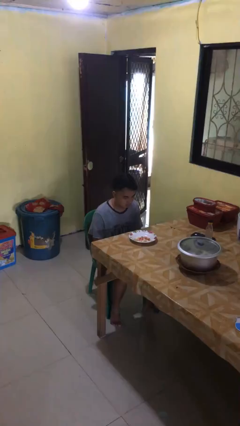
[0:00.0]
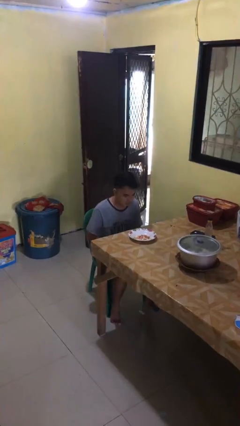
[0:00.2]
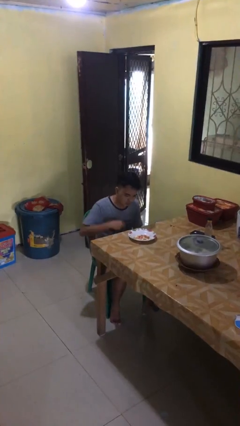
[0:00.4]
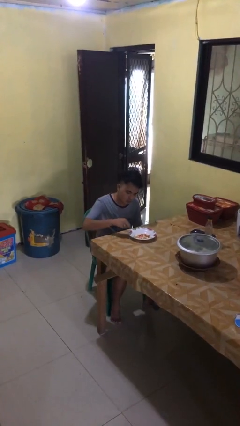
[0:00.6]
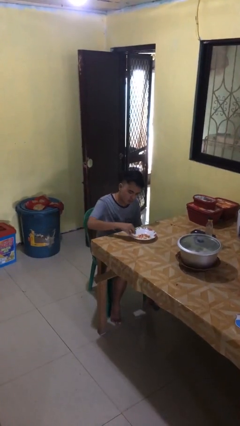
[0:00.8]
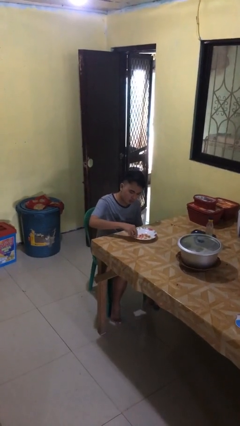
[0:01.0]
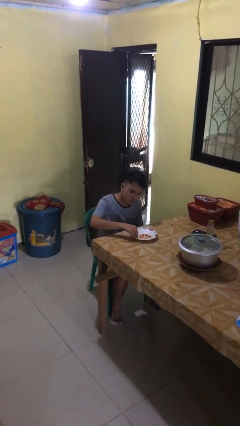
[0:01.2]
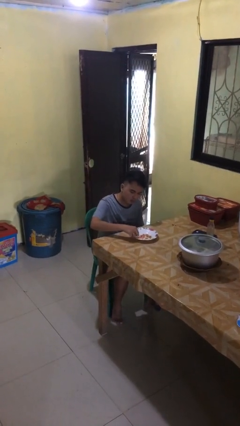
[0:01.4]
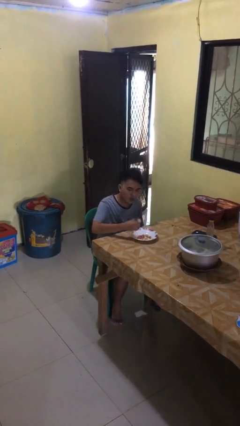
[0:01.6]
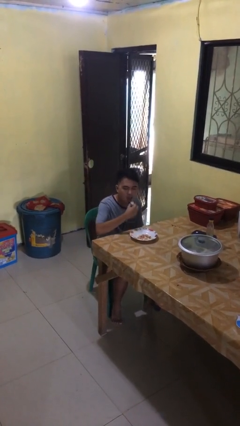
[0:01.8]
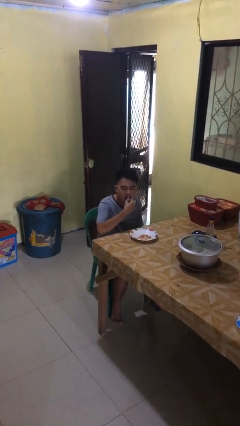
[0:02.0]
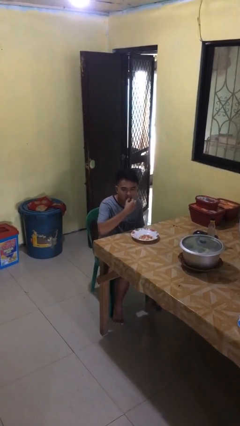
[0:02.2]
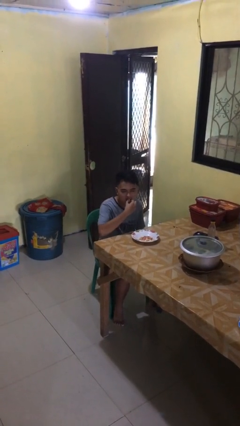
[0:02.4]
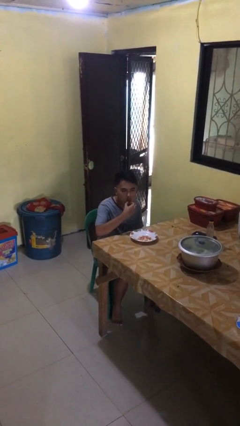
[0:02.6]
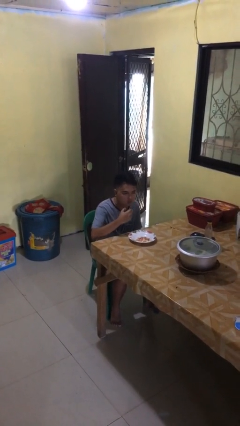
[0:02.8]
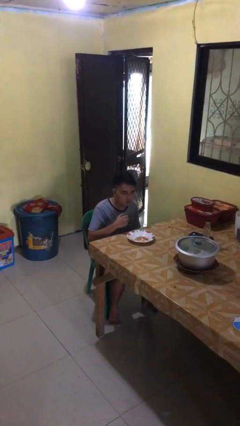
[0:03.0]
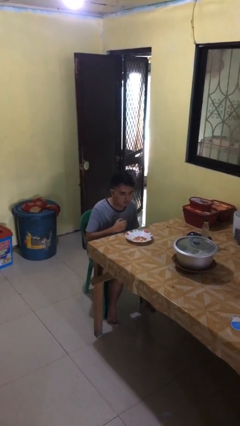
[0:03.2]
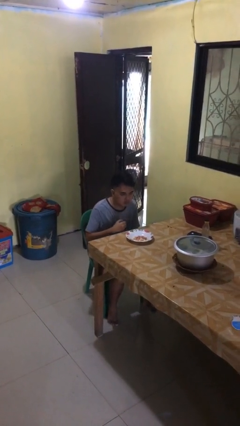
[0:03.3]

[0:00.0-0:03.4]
person eats with hands

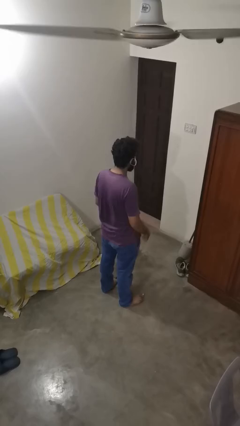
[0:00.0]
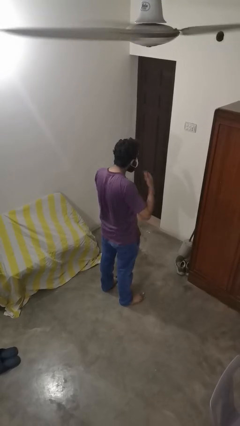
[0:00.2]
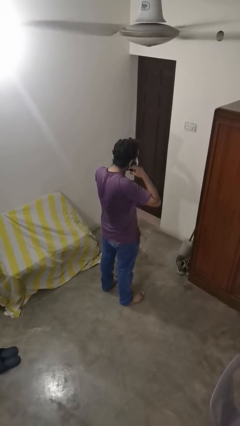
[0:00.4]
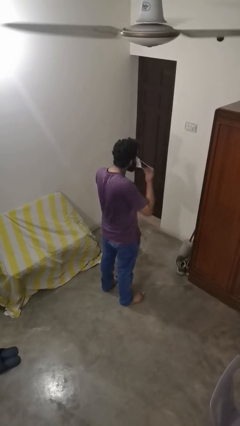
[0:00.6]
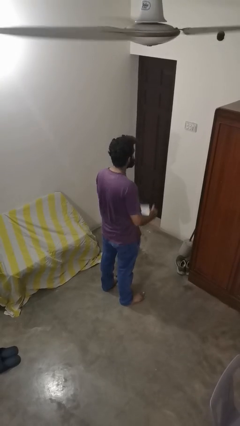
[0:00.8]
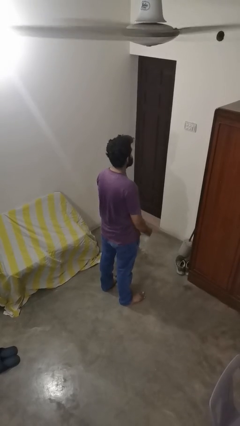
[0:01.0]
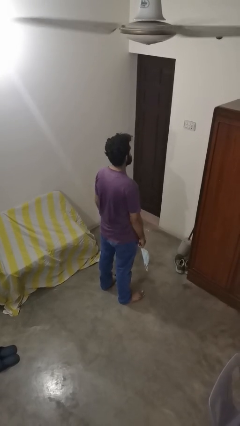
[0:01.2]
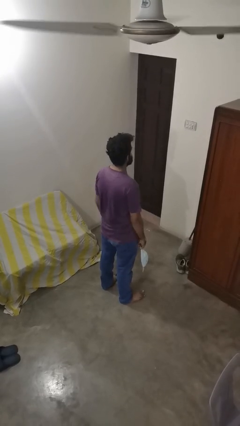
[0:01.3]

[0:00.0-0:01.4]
person takes off facemask

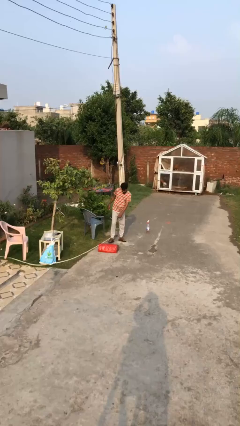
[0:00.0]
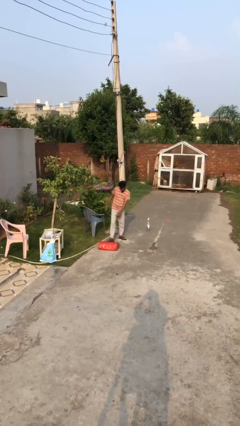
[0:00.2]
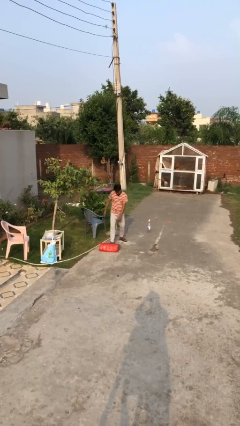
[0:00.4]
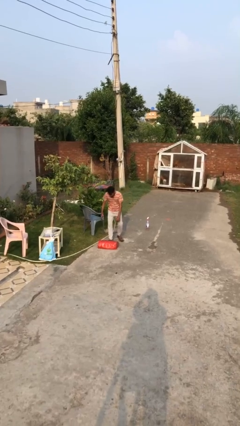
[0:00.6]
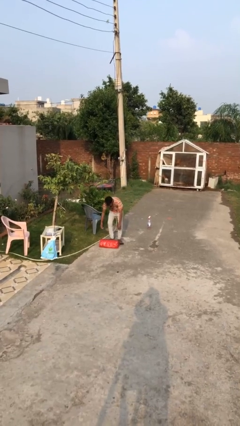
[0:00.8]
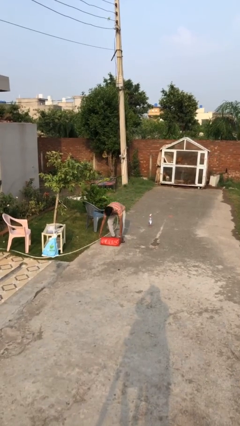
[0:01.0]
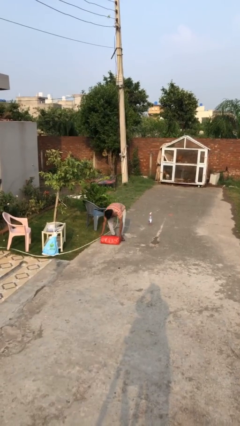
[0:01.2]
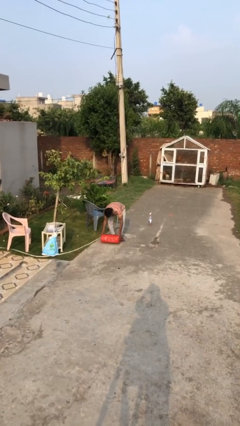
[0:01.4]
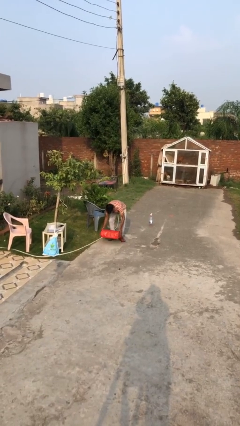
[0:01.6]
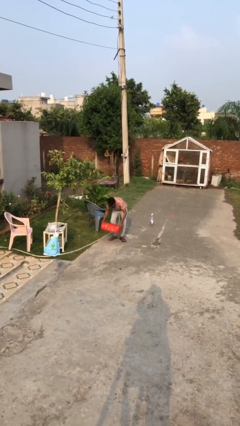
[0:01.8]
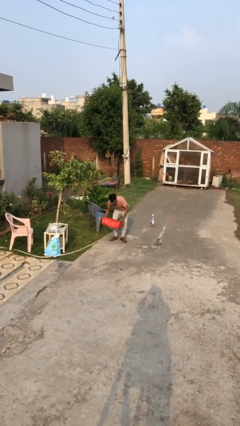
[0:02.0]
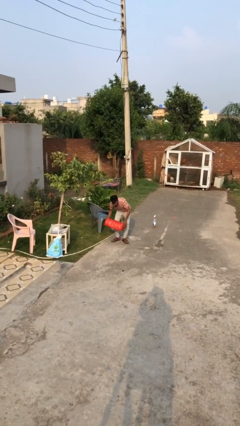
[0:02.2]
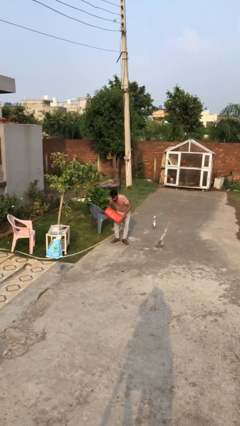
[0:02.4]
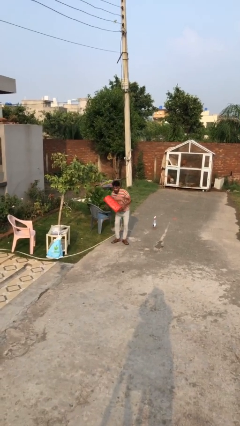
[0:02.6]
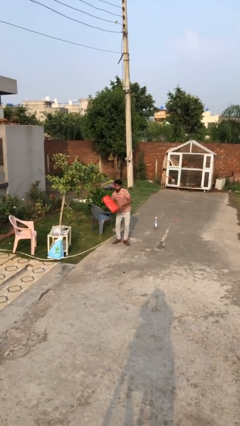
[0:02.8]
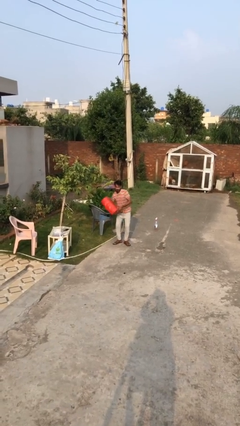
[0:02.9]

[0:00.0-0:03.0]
person picks up object from floor

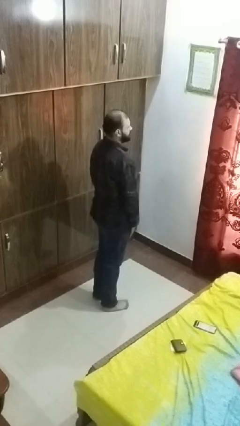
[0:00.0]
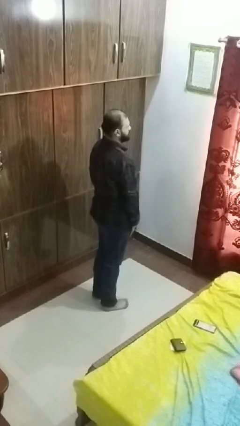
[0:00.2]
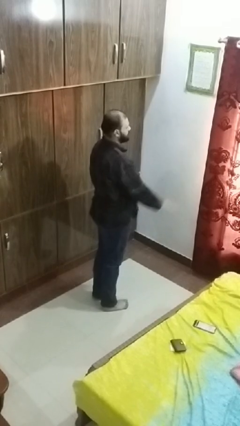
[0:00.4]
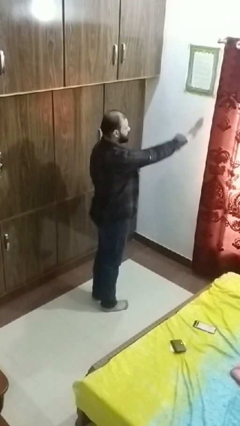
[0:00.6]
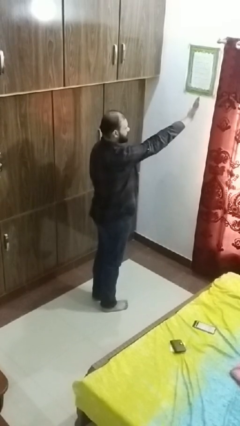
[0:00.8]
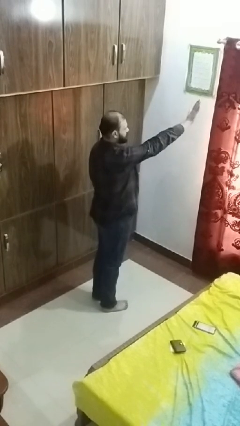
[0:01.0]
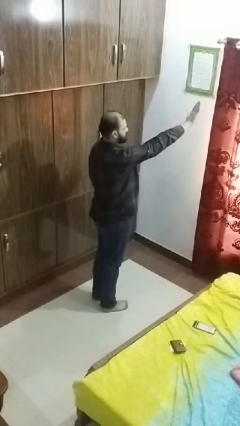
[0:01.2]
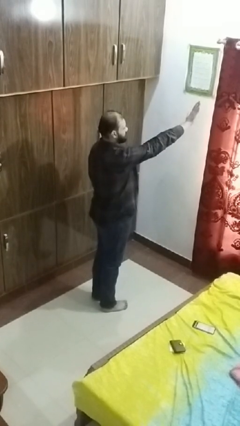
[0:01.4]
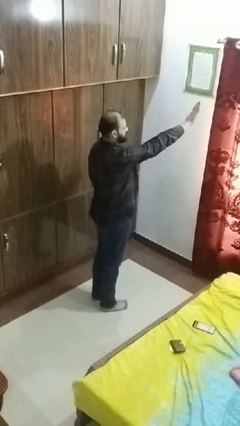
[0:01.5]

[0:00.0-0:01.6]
person gestures stop

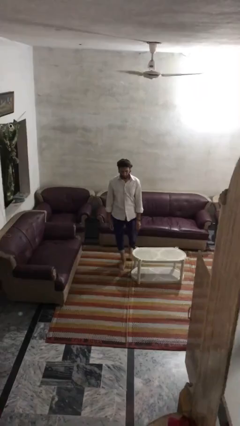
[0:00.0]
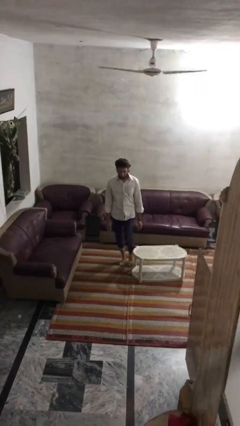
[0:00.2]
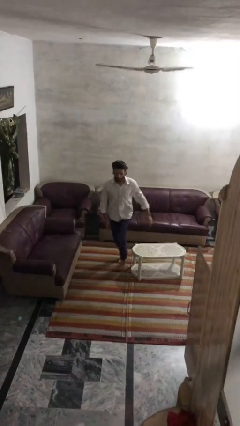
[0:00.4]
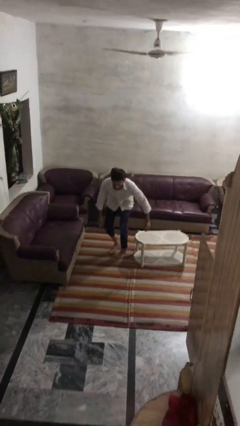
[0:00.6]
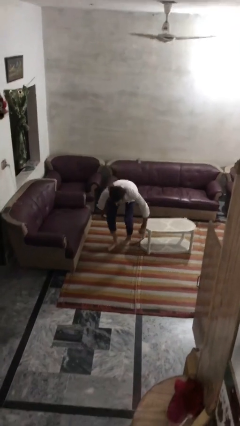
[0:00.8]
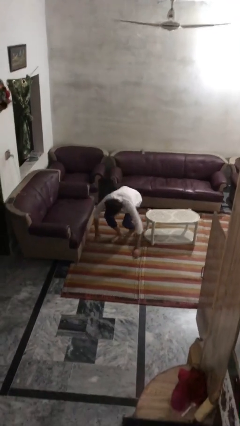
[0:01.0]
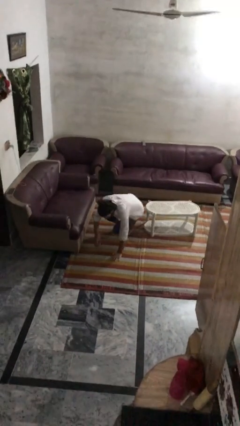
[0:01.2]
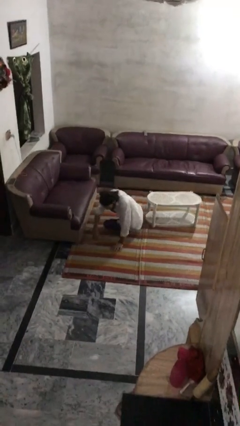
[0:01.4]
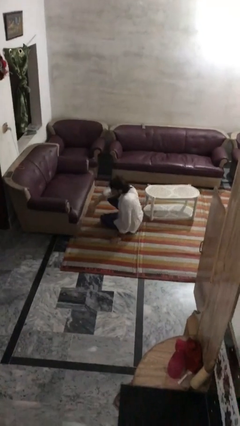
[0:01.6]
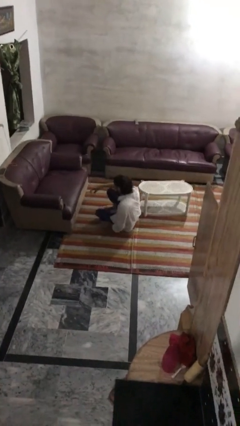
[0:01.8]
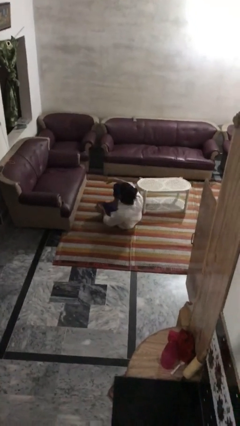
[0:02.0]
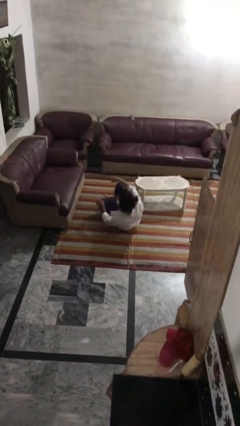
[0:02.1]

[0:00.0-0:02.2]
person trips on object on floor

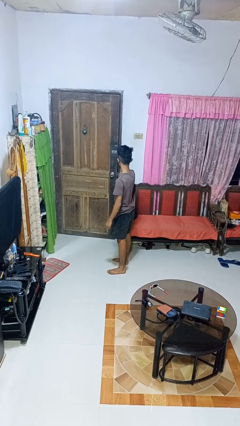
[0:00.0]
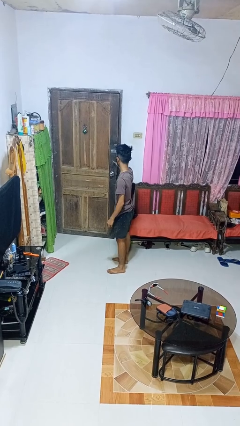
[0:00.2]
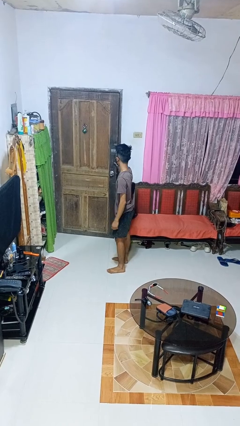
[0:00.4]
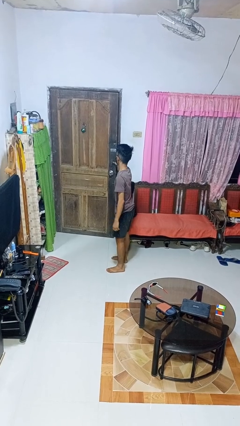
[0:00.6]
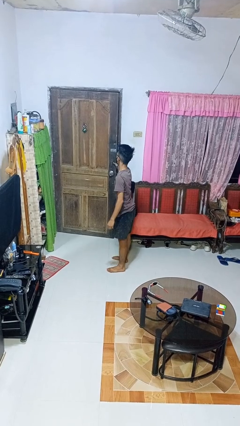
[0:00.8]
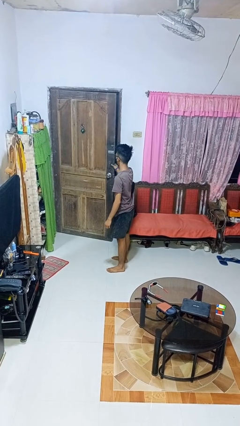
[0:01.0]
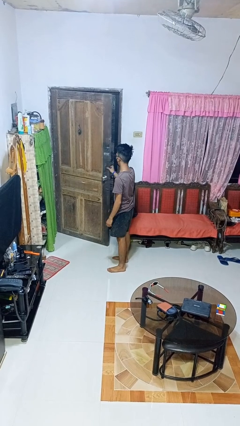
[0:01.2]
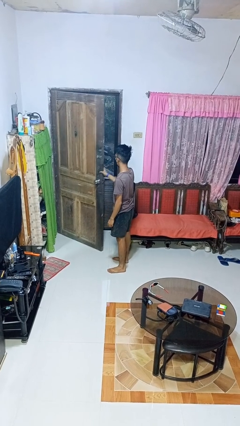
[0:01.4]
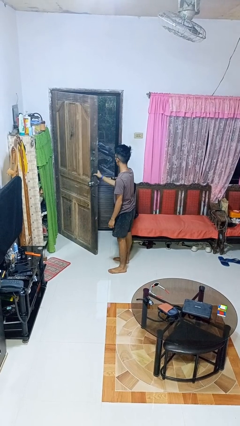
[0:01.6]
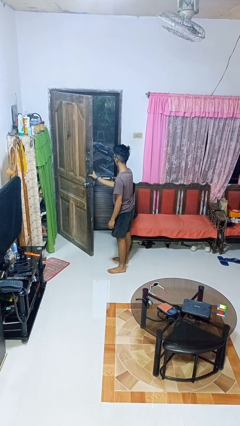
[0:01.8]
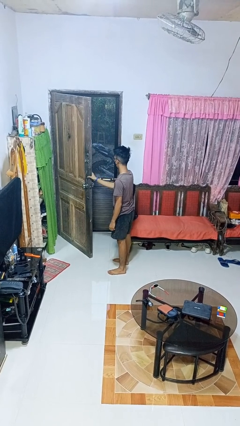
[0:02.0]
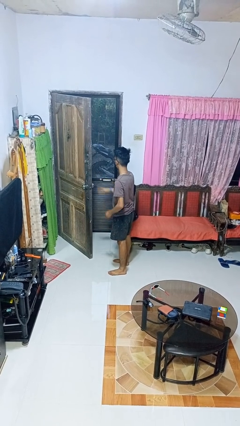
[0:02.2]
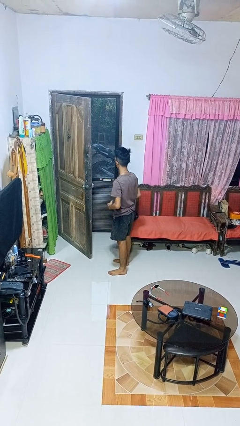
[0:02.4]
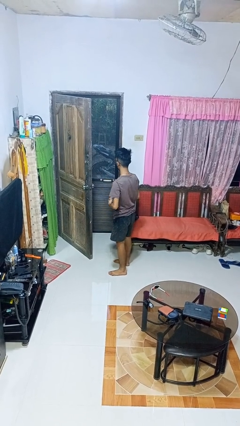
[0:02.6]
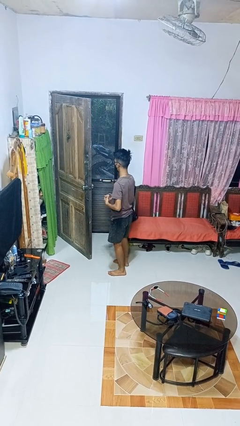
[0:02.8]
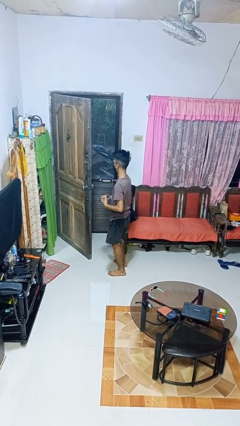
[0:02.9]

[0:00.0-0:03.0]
person opens facility door

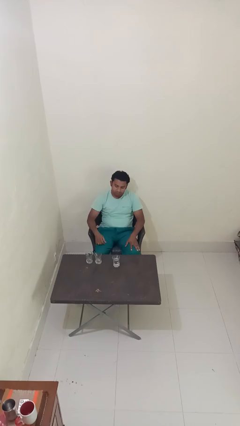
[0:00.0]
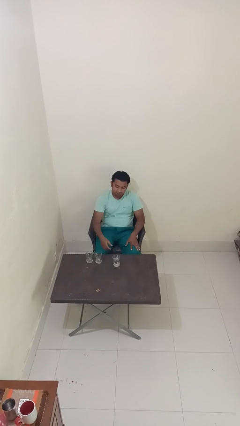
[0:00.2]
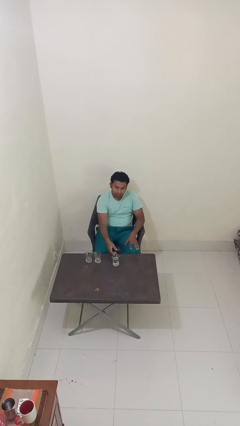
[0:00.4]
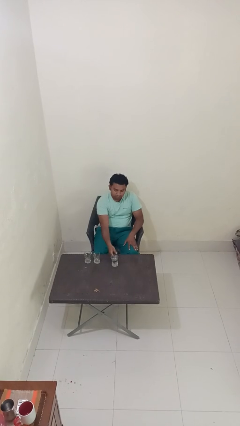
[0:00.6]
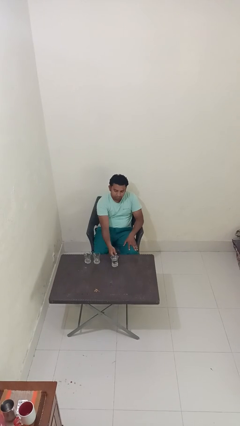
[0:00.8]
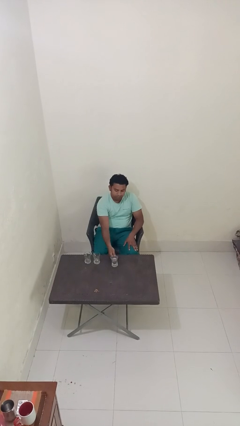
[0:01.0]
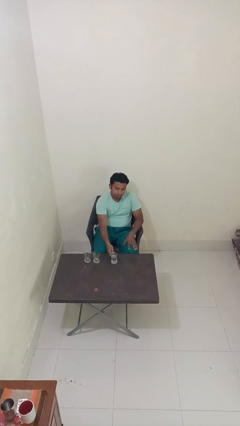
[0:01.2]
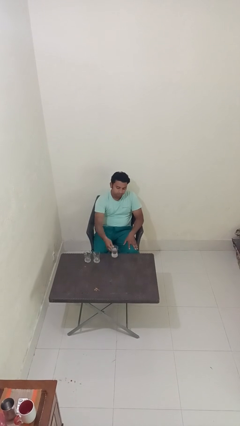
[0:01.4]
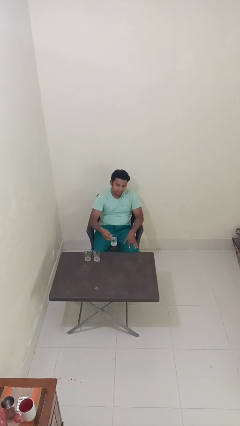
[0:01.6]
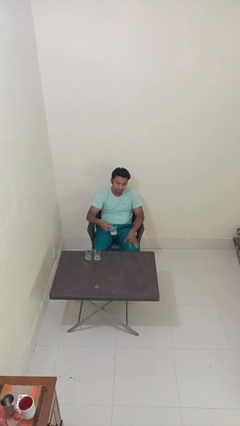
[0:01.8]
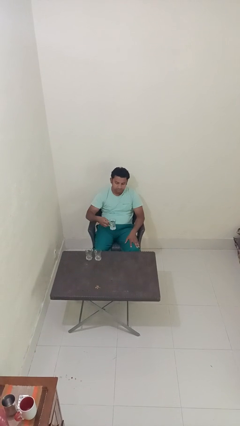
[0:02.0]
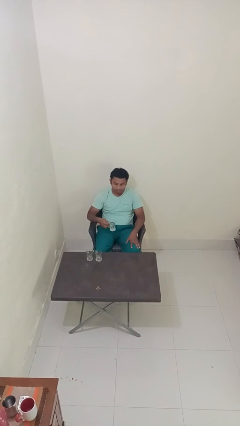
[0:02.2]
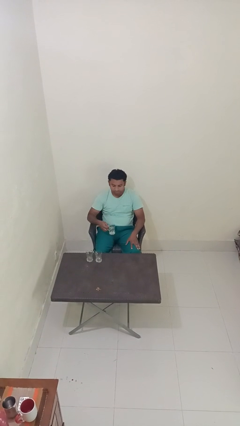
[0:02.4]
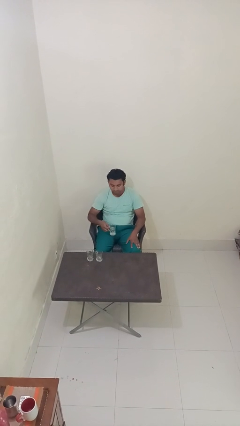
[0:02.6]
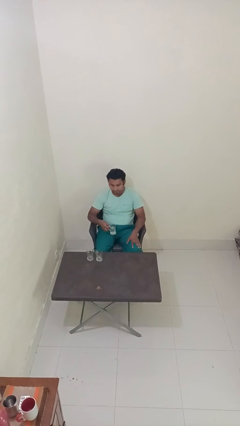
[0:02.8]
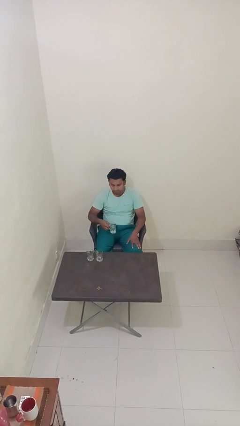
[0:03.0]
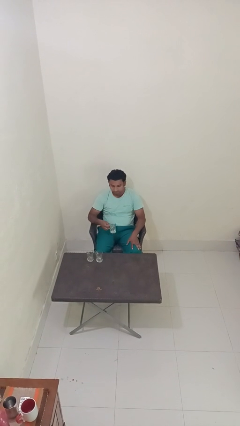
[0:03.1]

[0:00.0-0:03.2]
person picks up object from table
